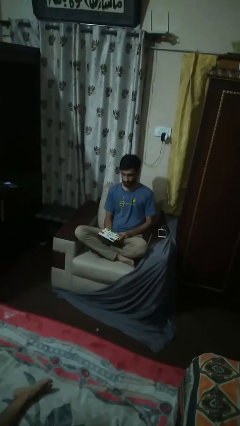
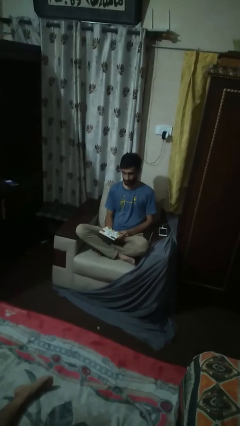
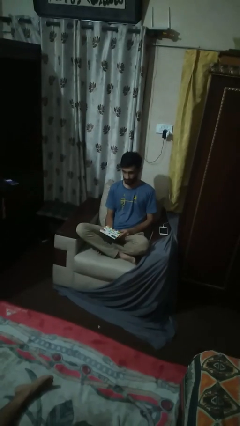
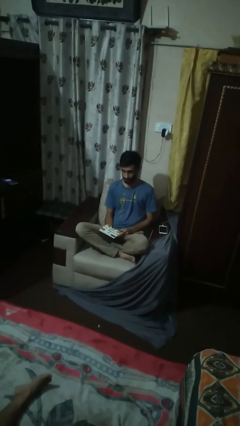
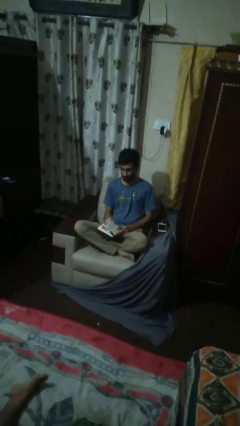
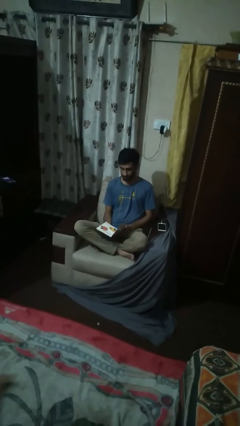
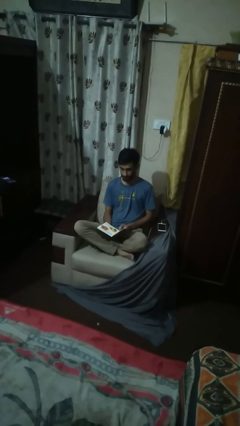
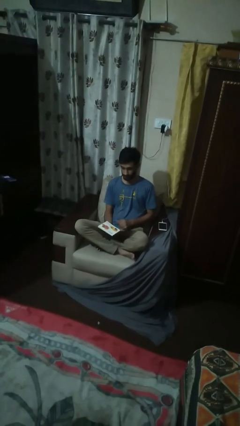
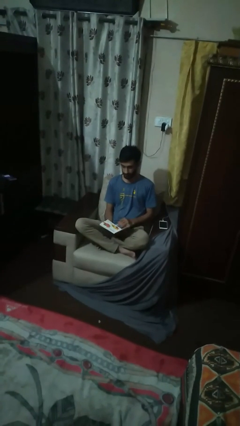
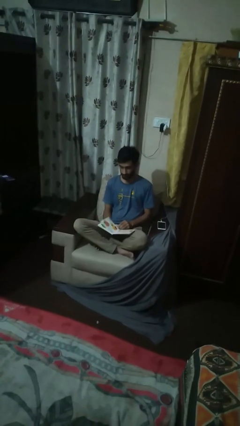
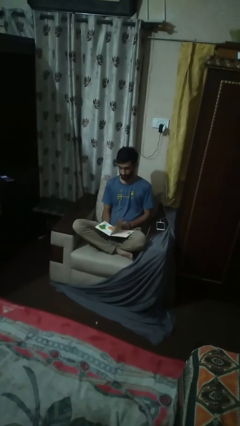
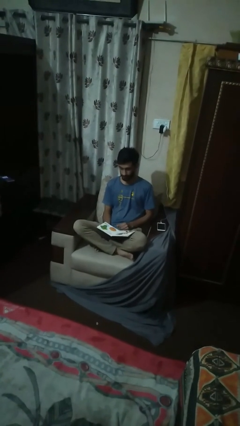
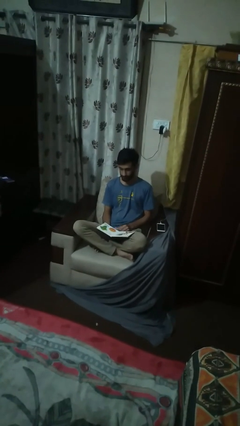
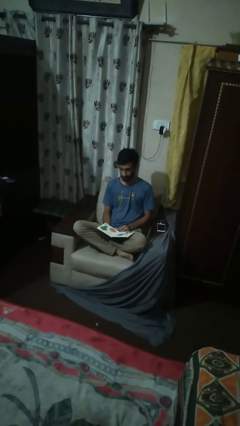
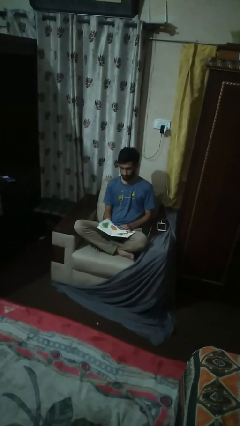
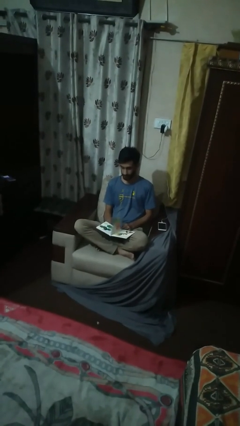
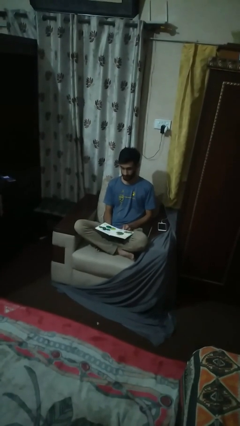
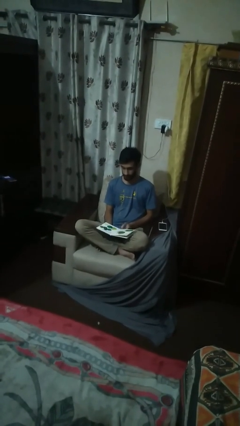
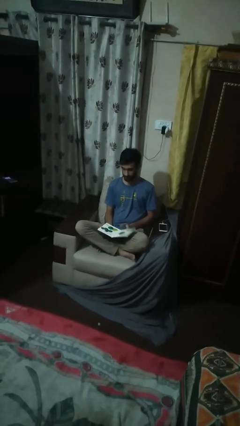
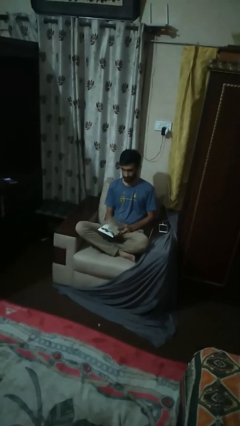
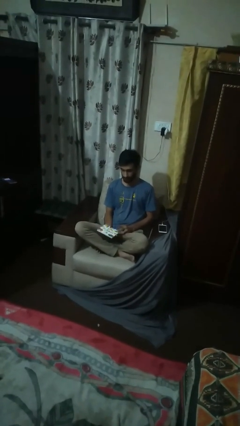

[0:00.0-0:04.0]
person reads magazine

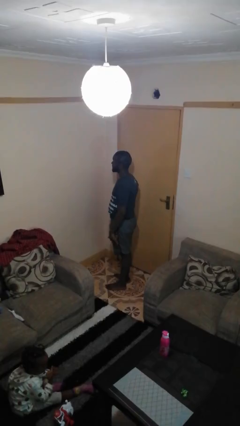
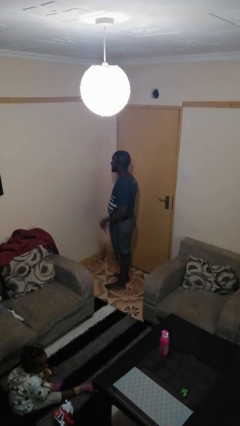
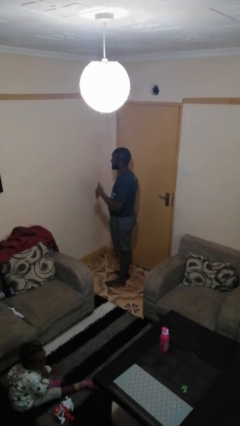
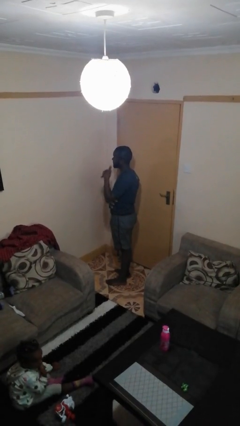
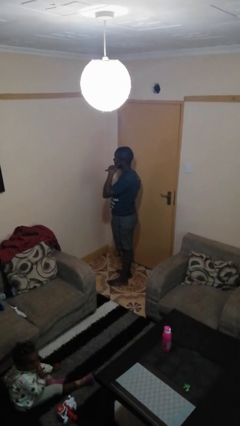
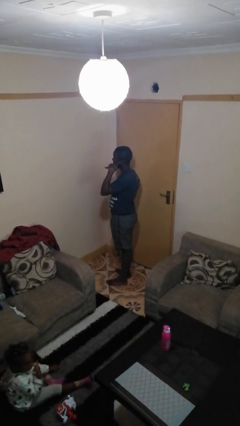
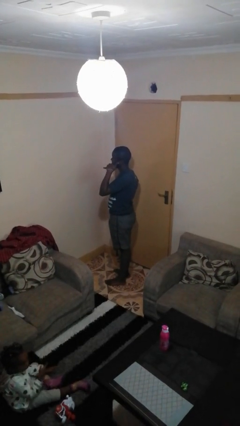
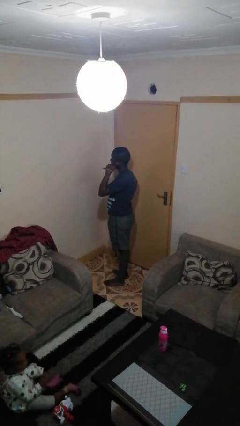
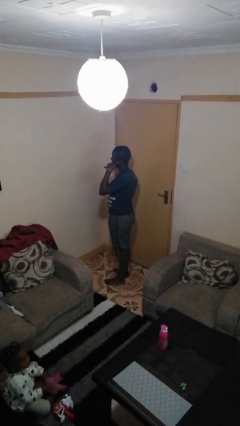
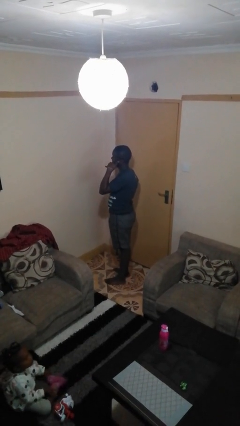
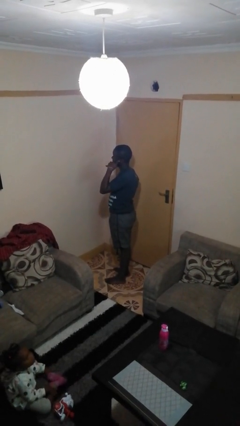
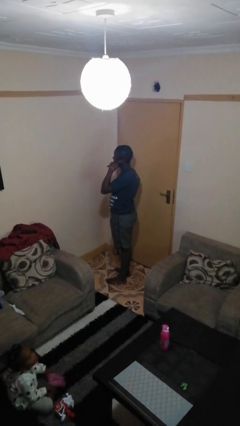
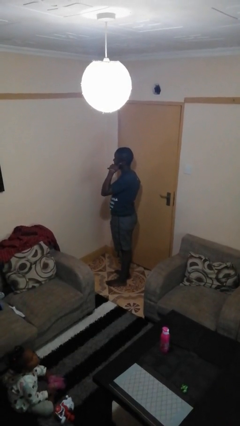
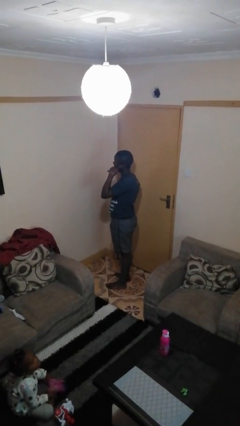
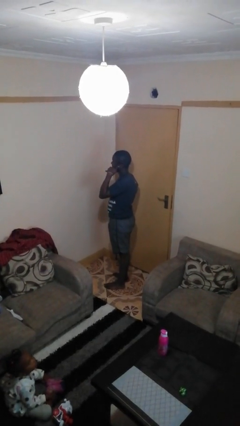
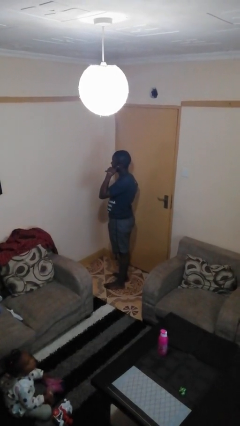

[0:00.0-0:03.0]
person gestures call me

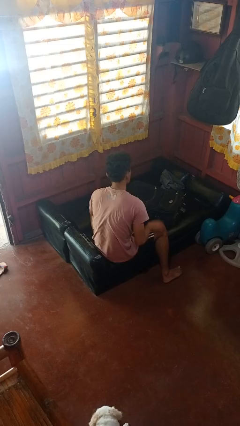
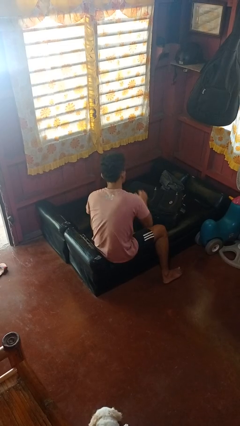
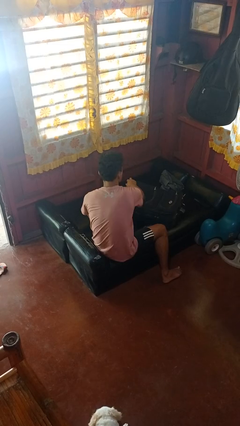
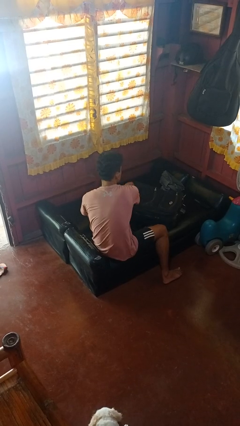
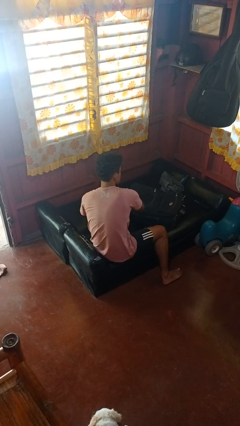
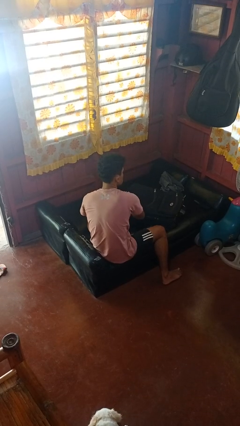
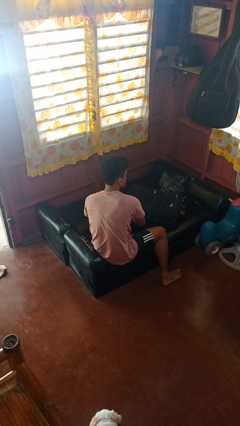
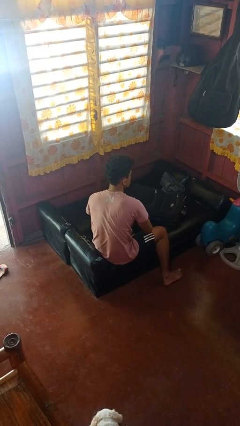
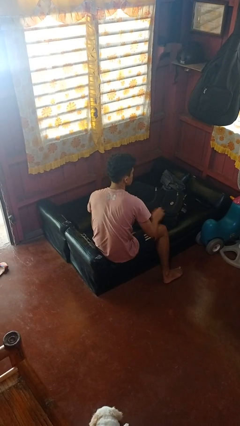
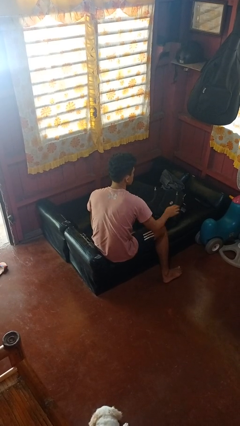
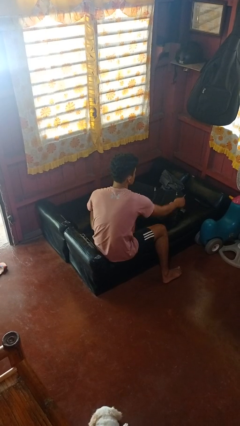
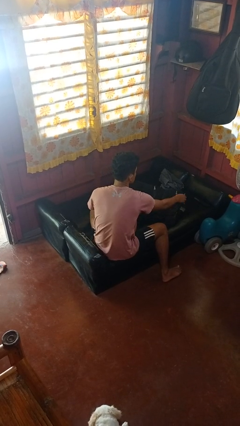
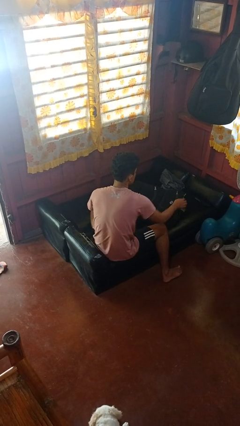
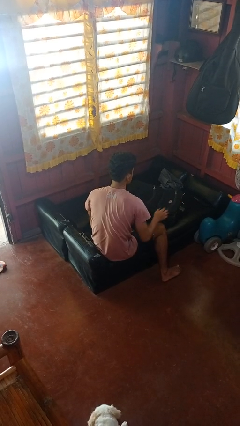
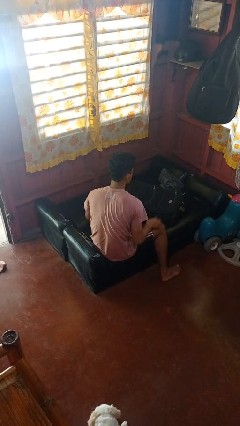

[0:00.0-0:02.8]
person closes suitcase

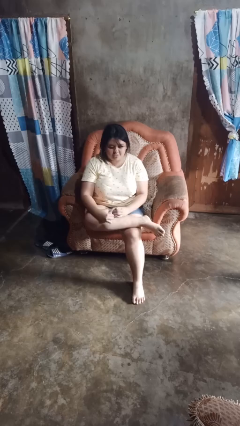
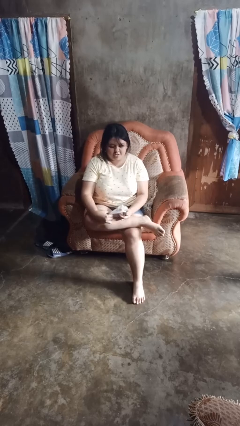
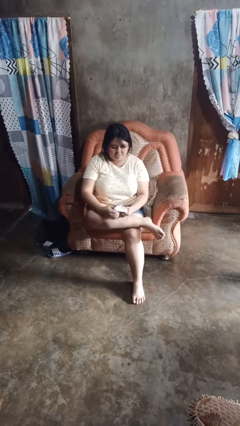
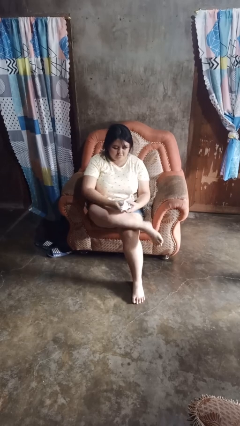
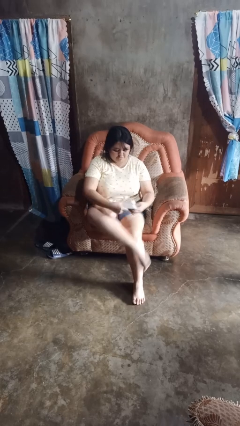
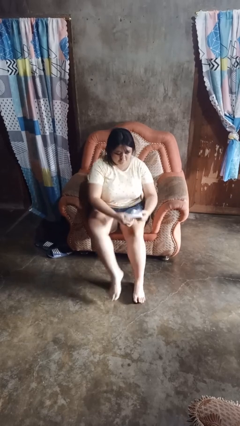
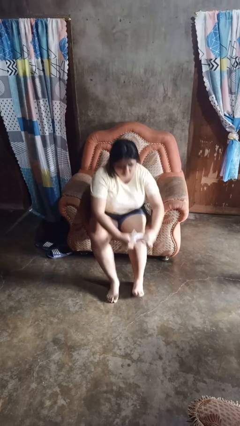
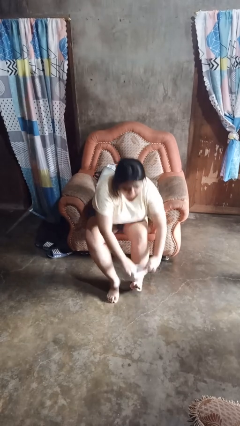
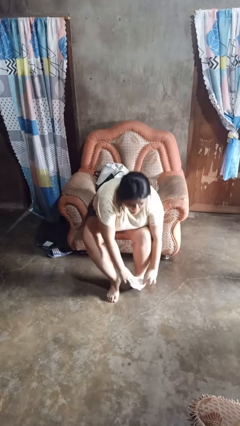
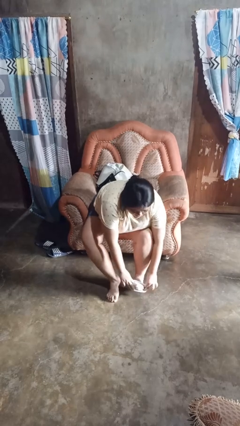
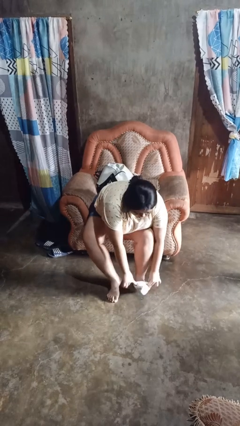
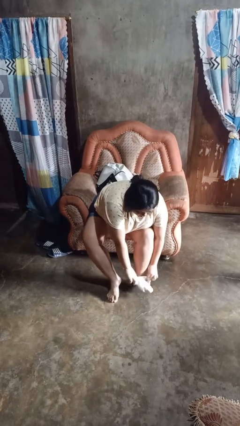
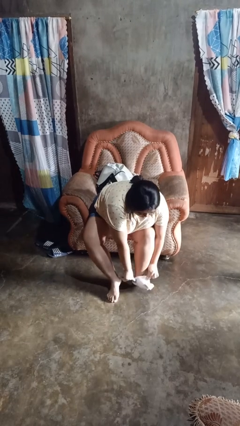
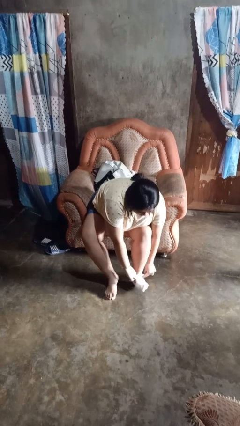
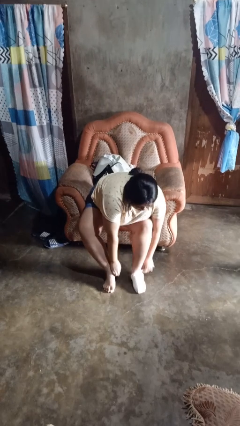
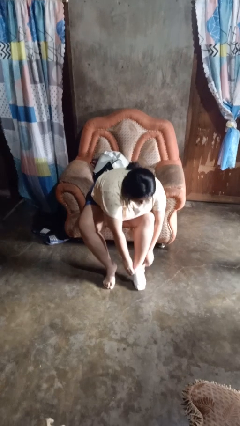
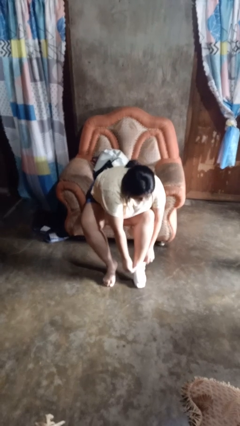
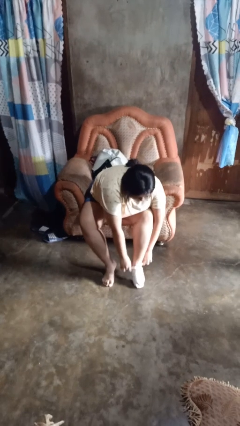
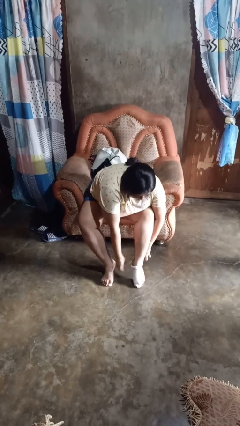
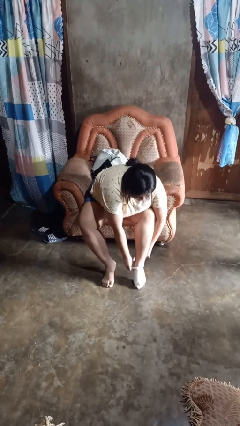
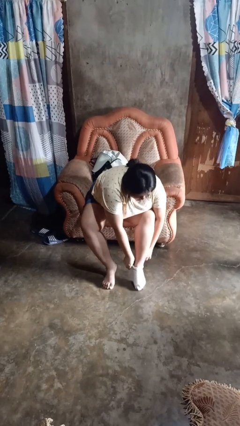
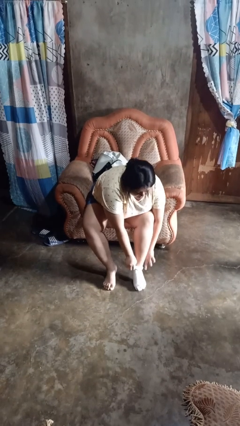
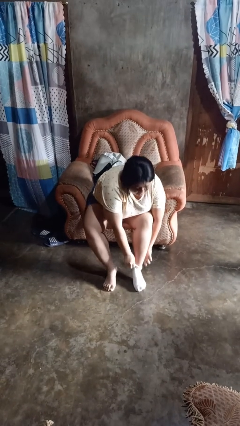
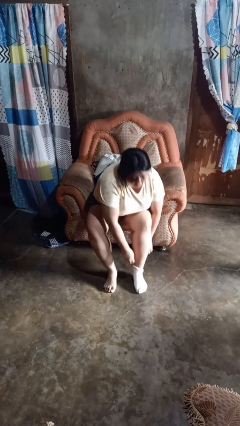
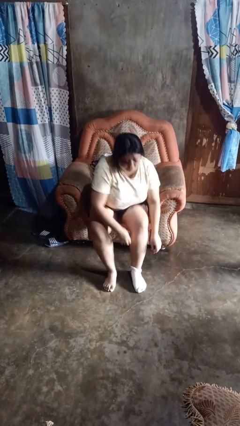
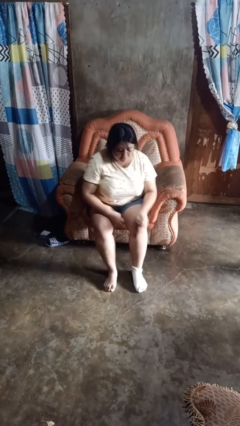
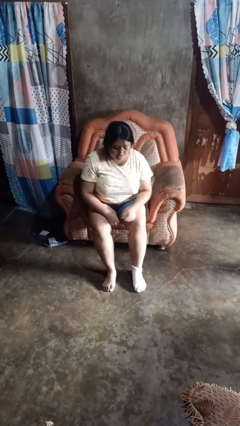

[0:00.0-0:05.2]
person puts on socks

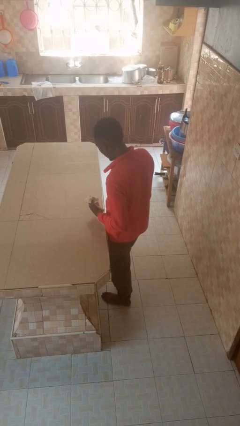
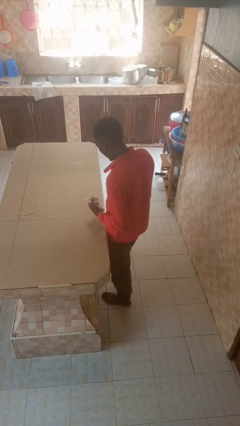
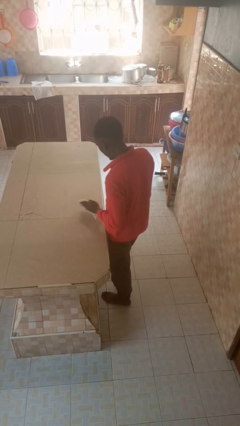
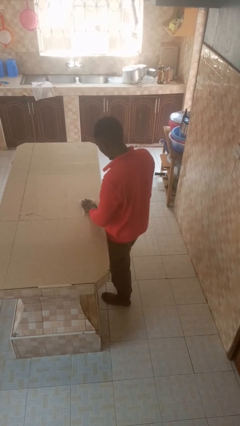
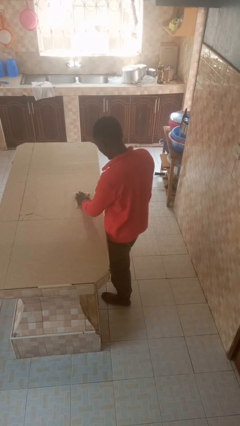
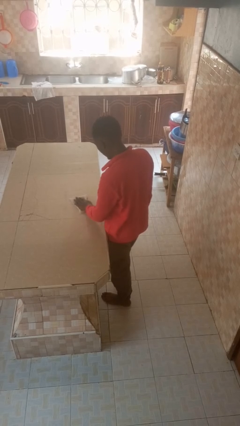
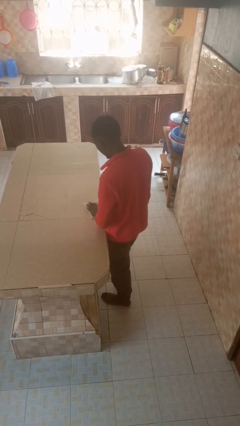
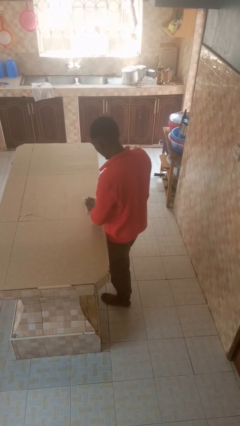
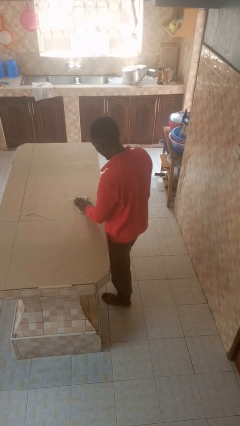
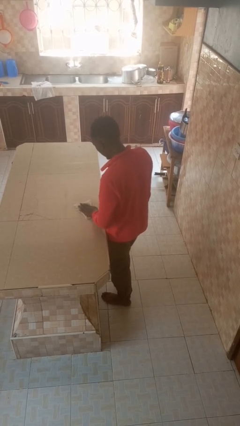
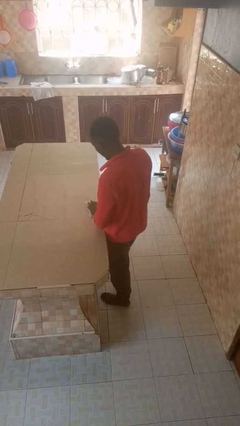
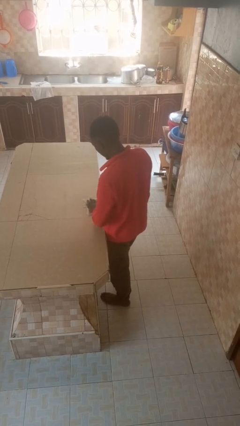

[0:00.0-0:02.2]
person cleans table with rag

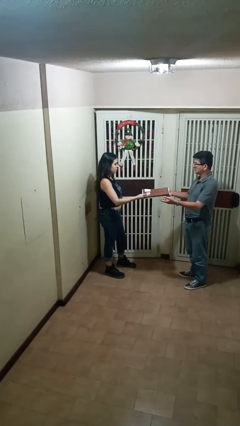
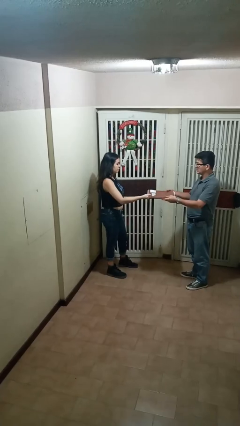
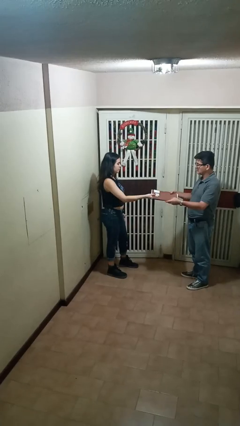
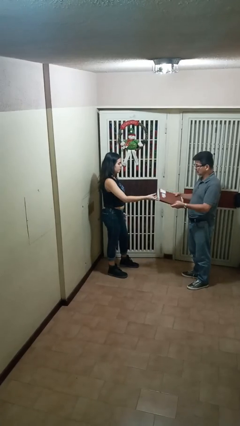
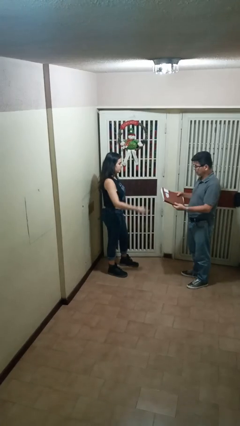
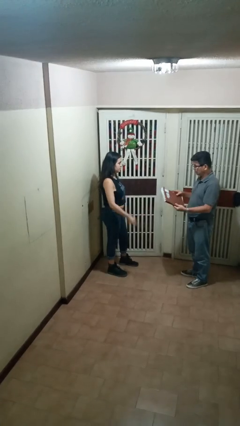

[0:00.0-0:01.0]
person transfers object to person
